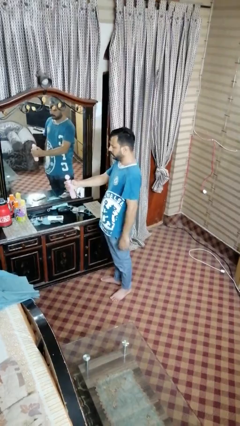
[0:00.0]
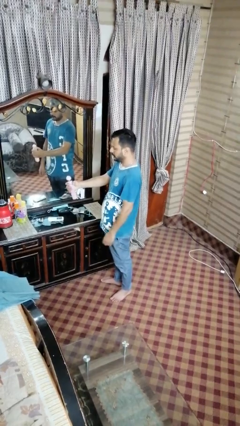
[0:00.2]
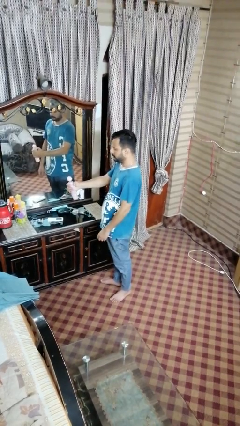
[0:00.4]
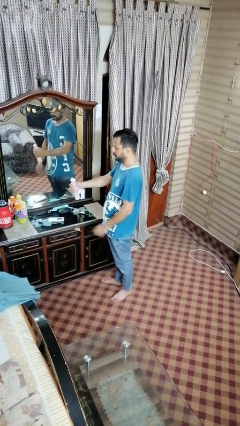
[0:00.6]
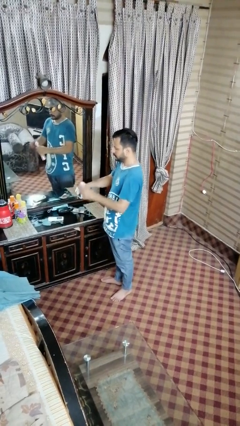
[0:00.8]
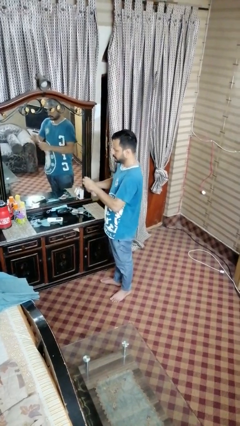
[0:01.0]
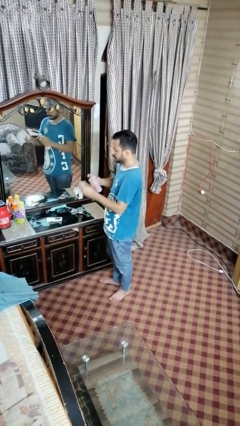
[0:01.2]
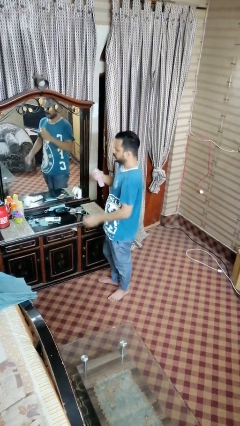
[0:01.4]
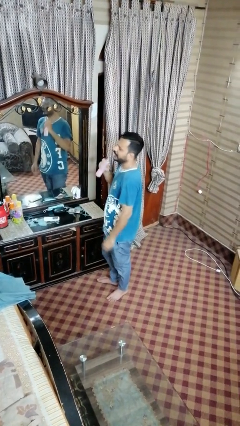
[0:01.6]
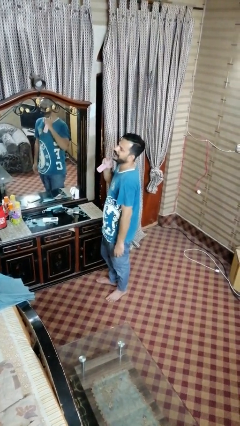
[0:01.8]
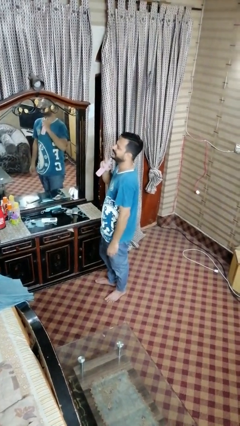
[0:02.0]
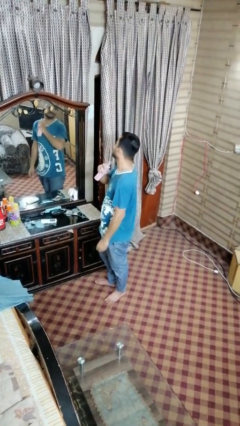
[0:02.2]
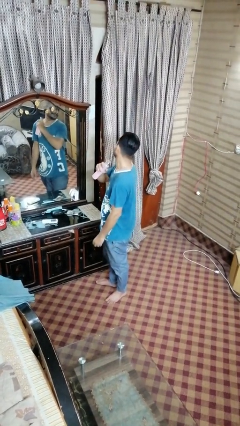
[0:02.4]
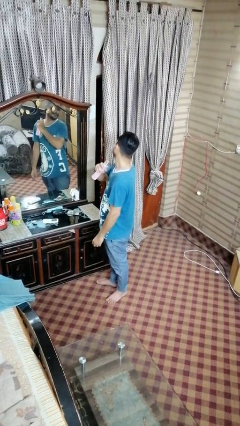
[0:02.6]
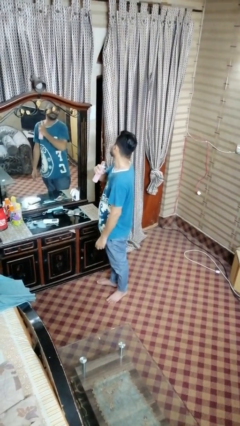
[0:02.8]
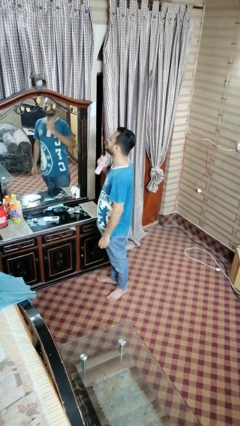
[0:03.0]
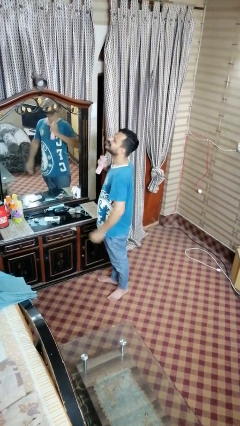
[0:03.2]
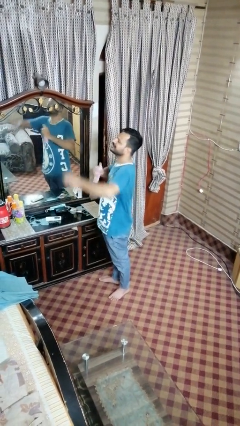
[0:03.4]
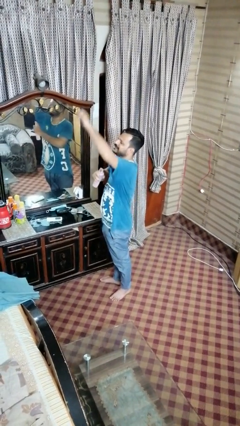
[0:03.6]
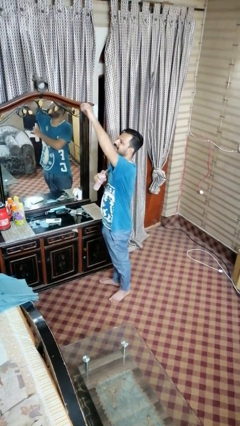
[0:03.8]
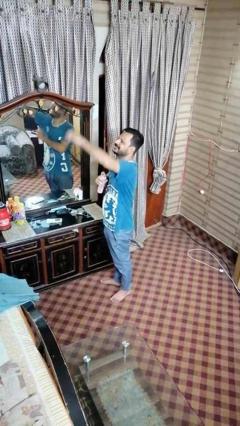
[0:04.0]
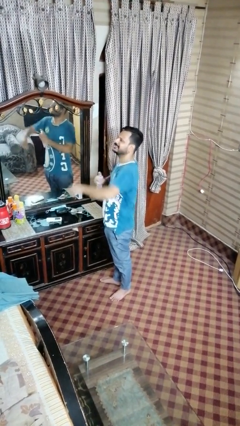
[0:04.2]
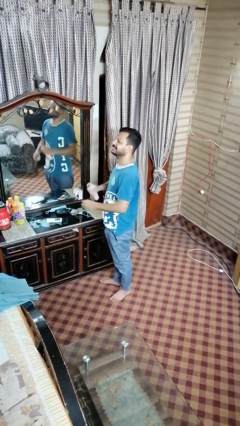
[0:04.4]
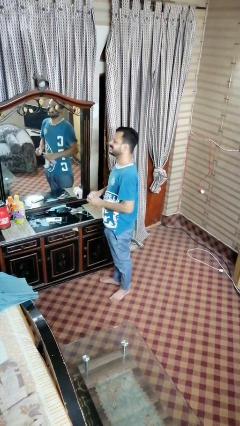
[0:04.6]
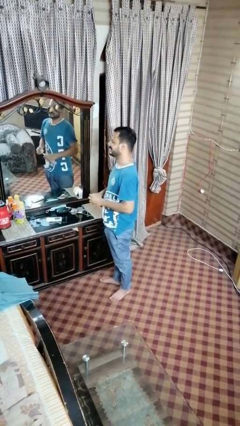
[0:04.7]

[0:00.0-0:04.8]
person sprays from bottle

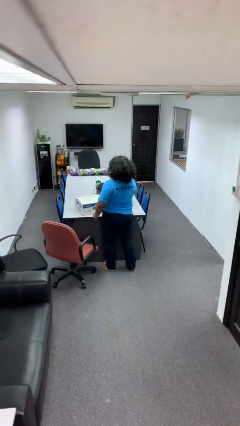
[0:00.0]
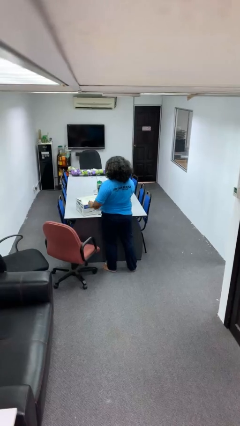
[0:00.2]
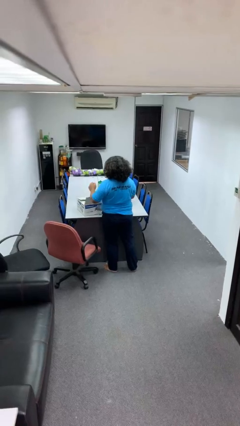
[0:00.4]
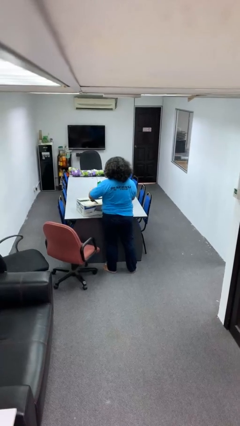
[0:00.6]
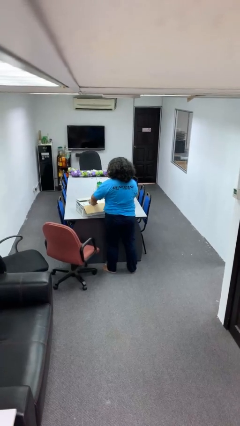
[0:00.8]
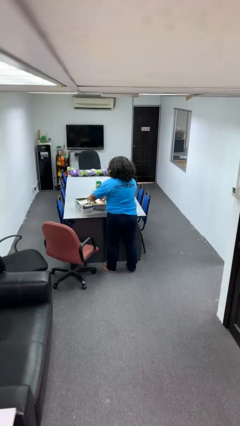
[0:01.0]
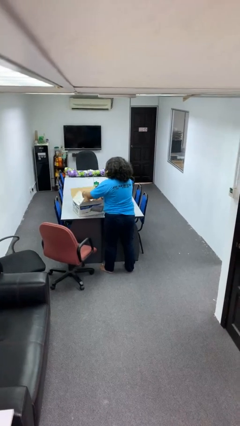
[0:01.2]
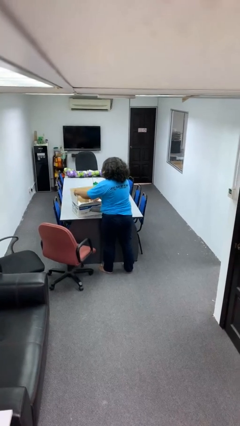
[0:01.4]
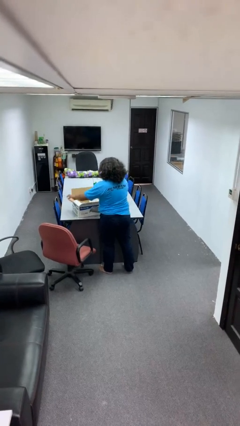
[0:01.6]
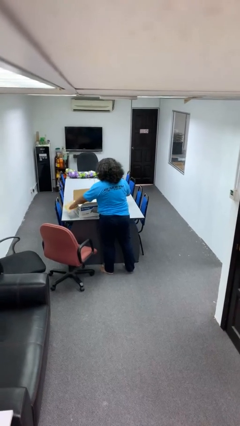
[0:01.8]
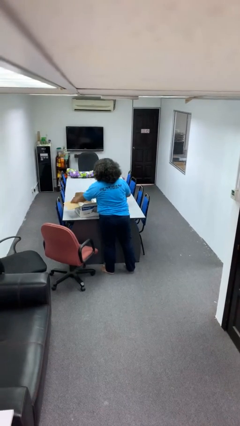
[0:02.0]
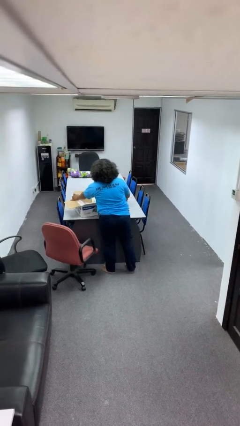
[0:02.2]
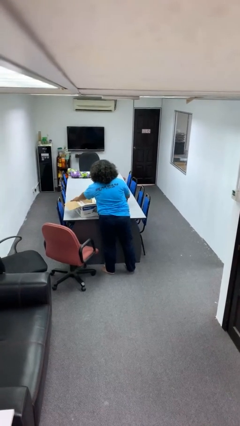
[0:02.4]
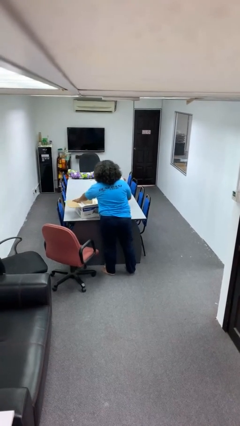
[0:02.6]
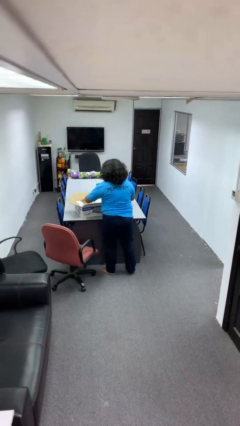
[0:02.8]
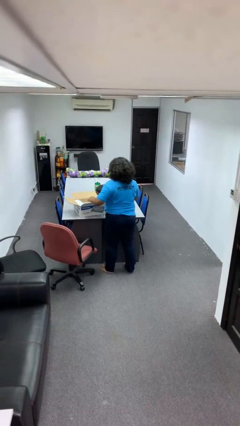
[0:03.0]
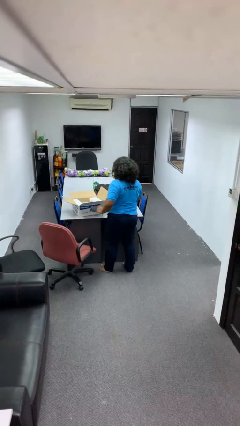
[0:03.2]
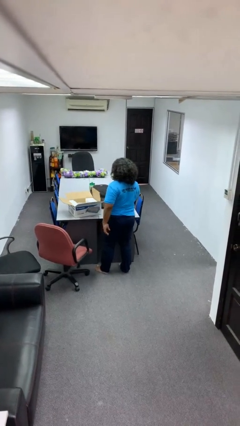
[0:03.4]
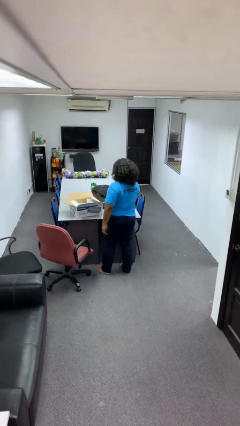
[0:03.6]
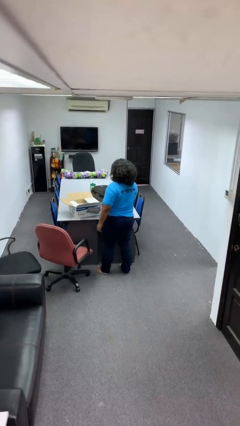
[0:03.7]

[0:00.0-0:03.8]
person opens box

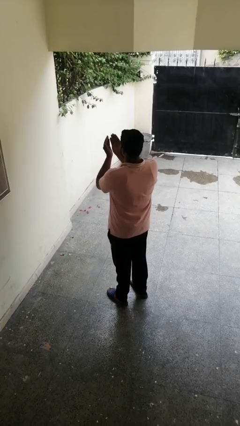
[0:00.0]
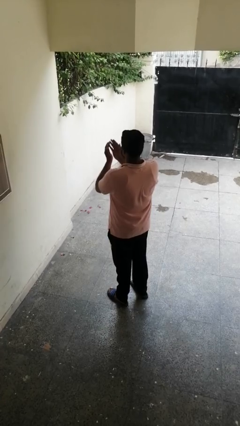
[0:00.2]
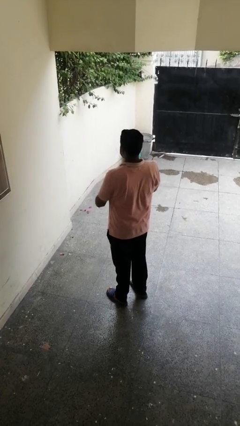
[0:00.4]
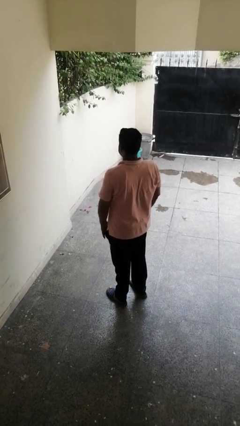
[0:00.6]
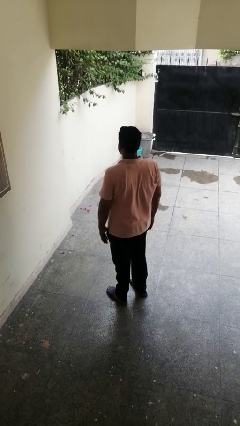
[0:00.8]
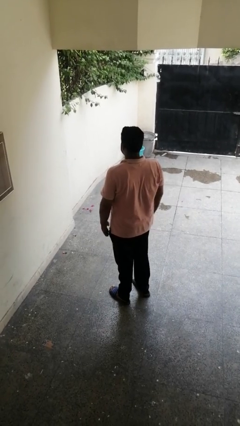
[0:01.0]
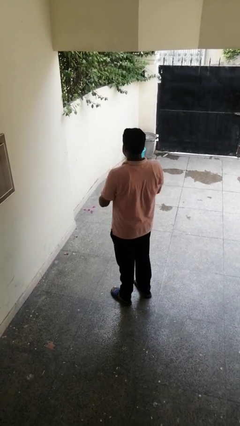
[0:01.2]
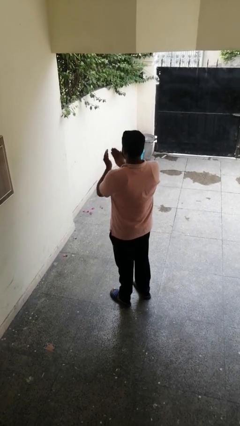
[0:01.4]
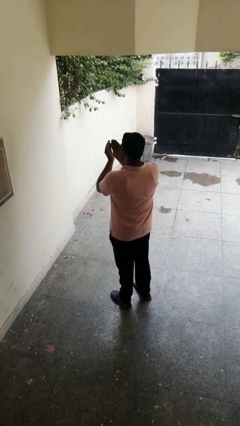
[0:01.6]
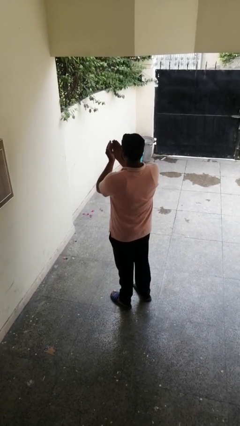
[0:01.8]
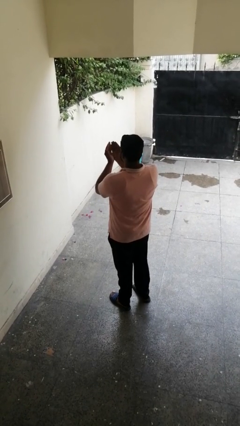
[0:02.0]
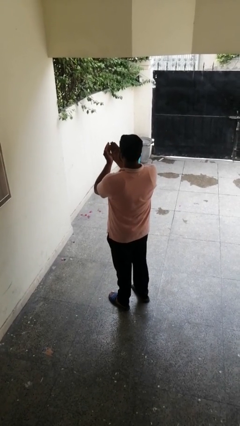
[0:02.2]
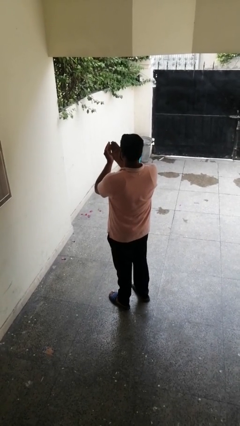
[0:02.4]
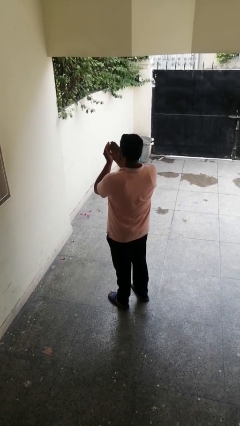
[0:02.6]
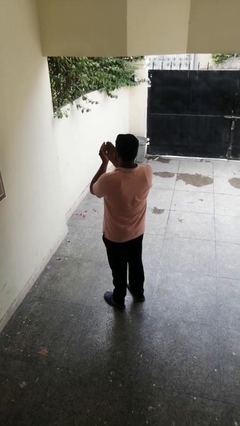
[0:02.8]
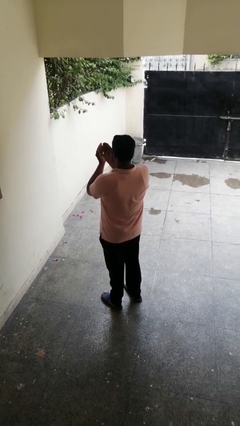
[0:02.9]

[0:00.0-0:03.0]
person prays

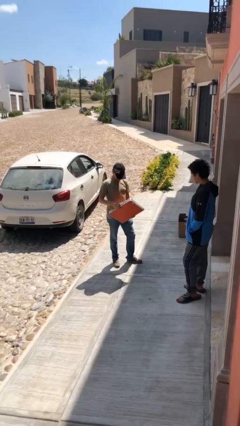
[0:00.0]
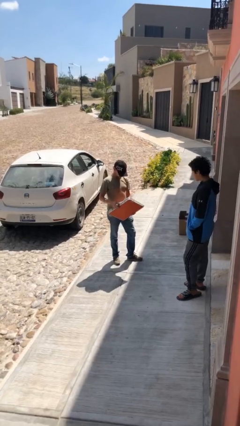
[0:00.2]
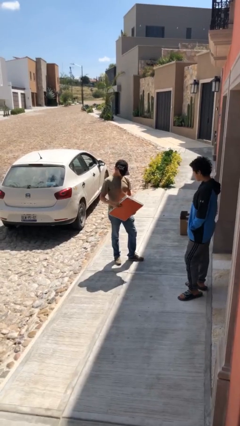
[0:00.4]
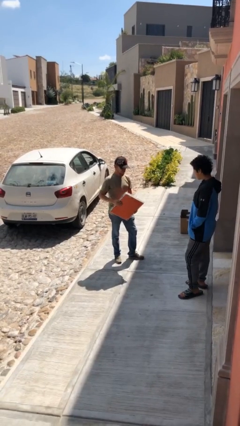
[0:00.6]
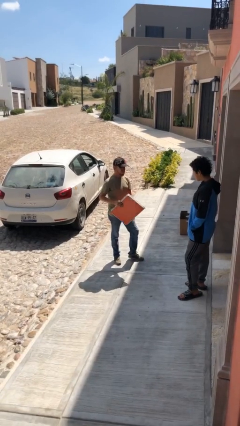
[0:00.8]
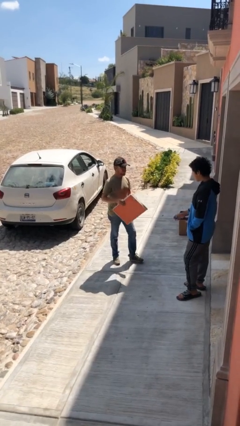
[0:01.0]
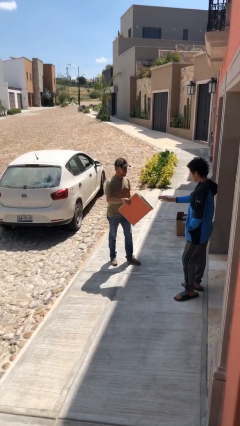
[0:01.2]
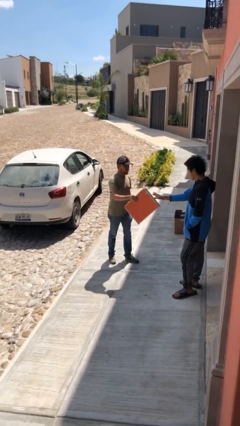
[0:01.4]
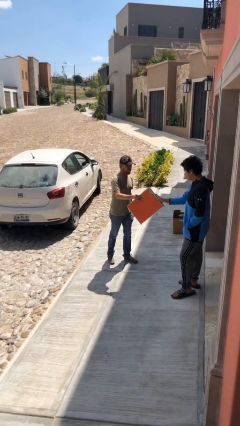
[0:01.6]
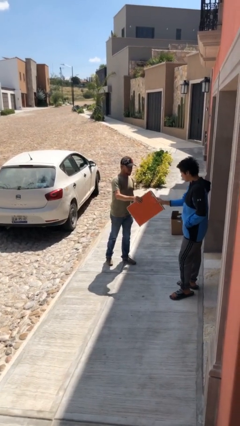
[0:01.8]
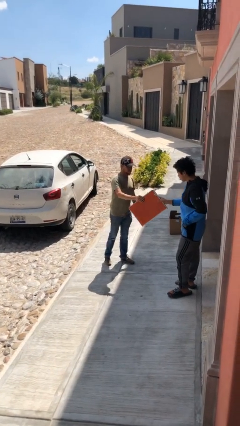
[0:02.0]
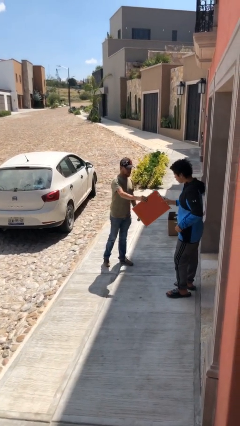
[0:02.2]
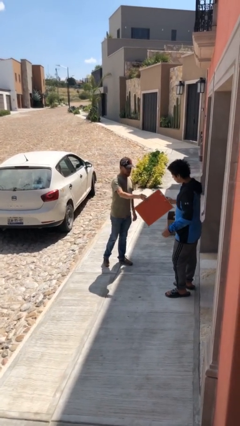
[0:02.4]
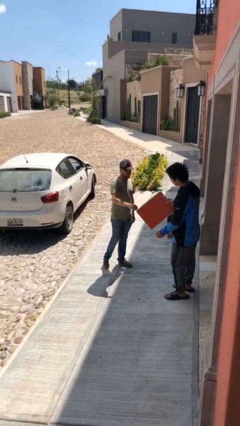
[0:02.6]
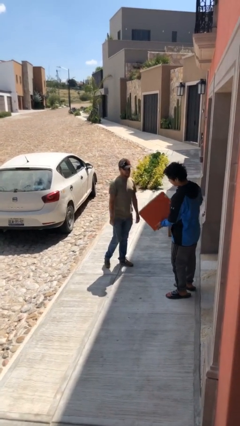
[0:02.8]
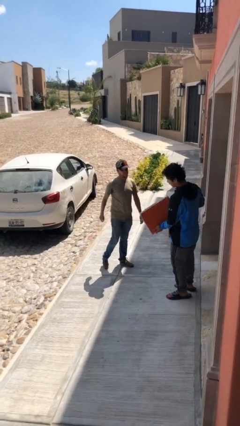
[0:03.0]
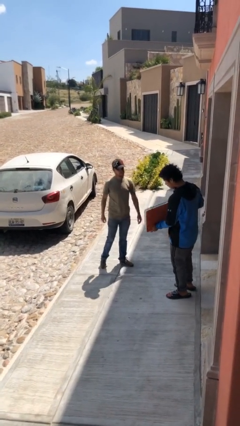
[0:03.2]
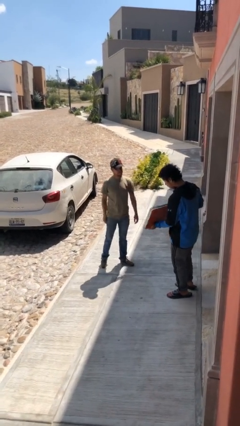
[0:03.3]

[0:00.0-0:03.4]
person transfers object to person

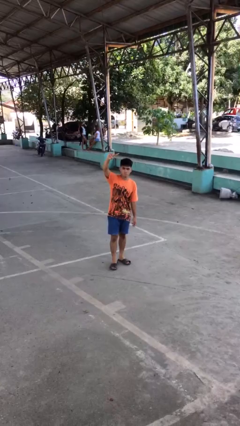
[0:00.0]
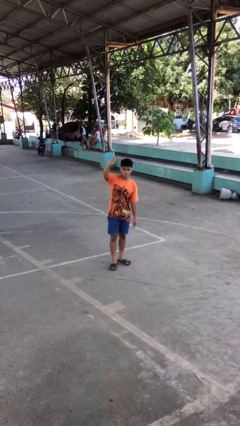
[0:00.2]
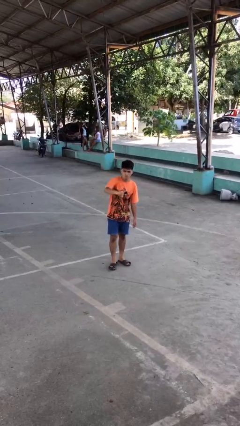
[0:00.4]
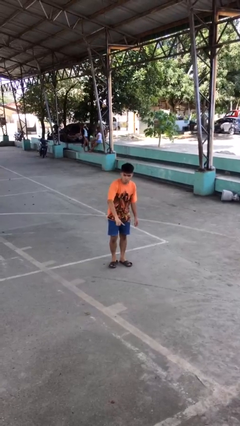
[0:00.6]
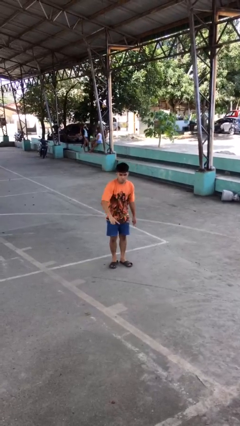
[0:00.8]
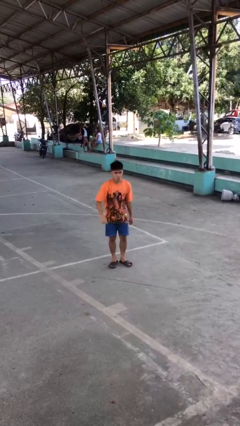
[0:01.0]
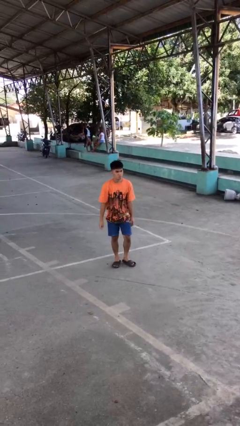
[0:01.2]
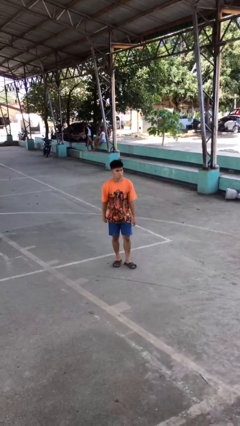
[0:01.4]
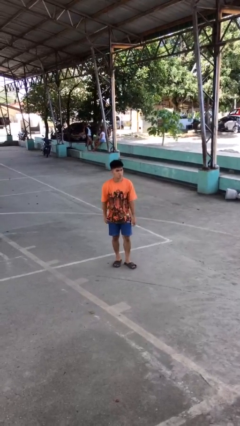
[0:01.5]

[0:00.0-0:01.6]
person gestures swipe down

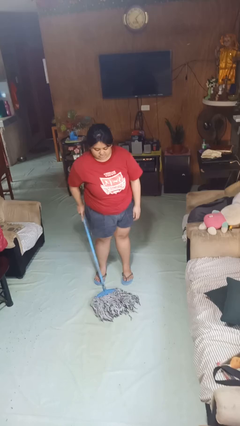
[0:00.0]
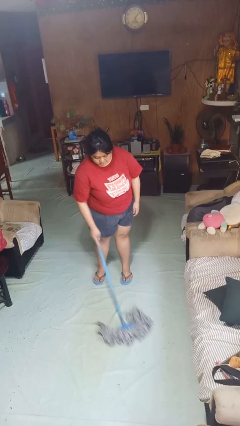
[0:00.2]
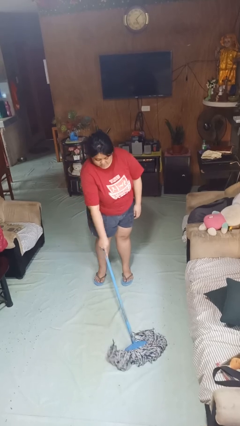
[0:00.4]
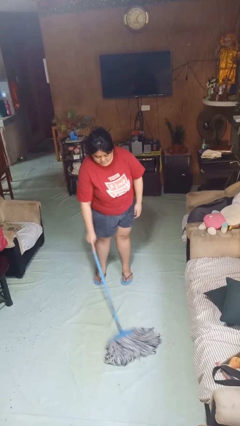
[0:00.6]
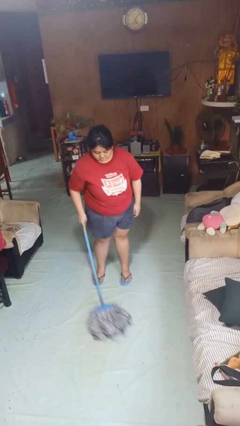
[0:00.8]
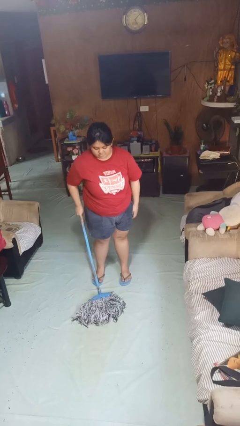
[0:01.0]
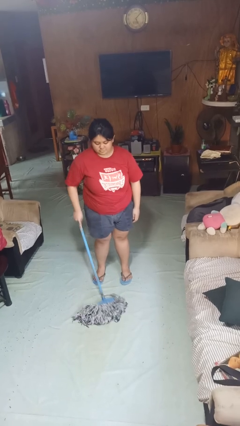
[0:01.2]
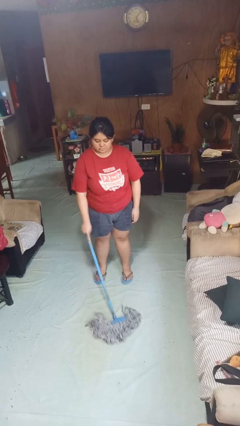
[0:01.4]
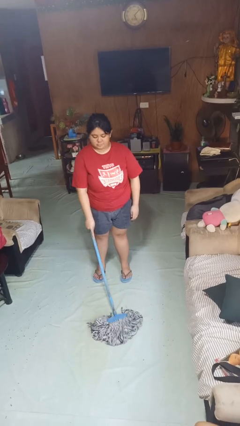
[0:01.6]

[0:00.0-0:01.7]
person mops
